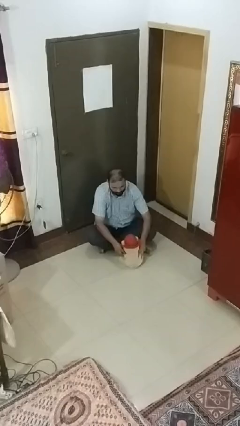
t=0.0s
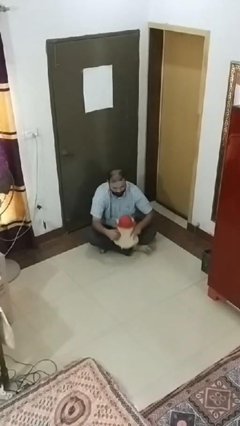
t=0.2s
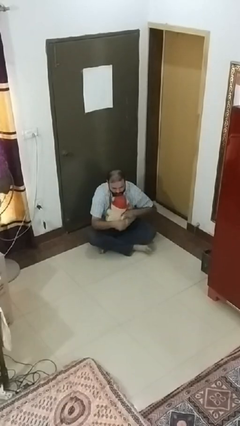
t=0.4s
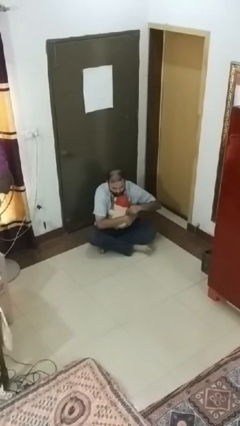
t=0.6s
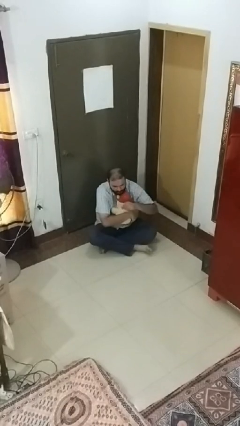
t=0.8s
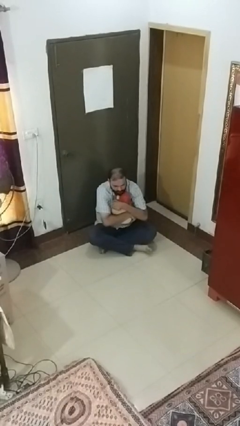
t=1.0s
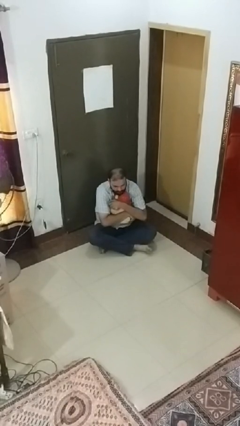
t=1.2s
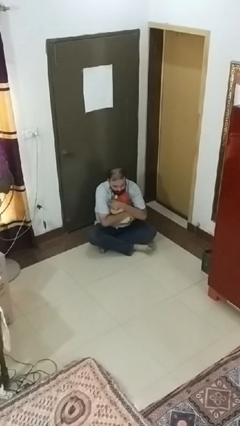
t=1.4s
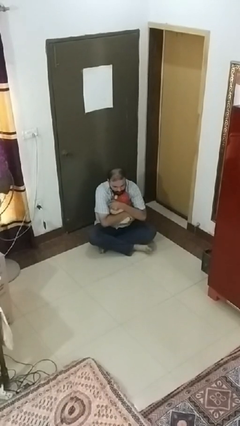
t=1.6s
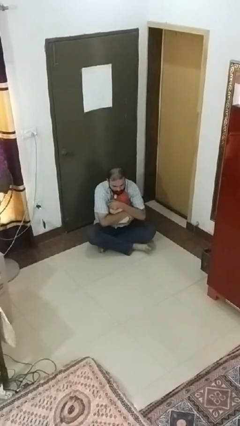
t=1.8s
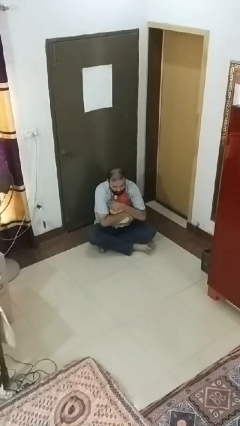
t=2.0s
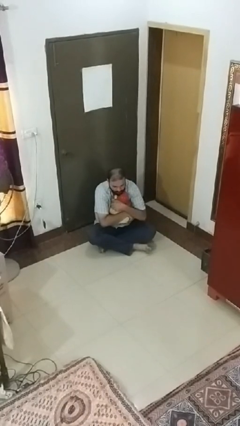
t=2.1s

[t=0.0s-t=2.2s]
person hugs stuffed animal

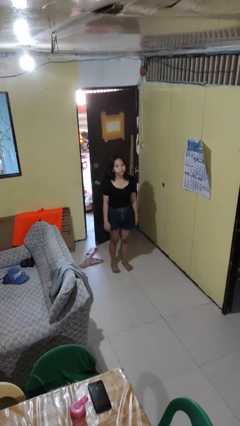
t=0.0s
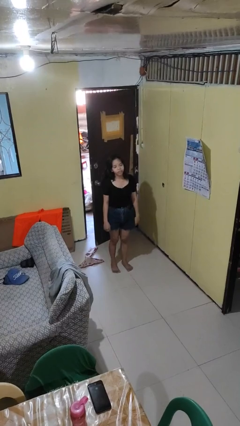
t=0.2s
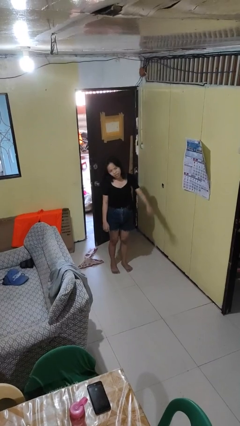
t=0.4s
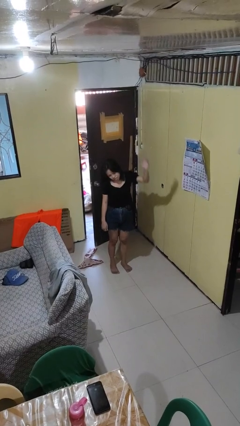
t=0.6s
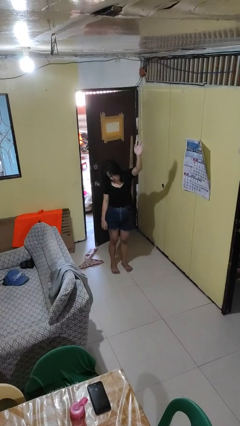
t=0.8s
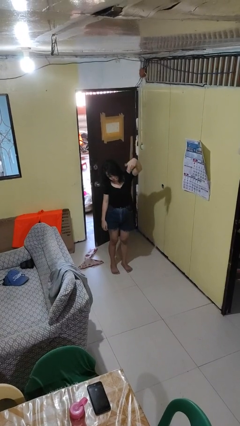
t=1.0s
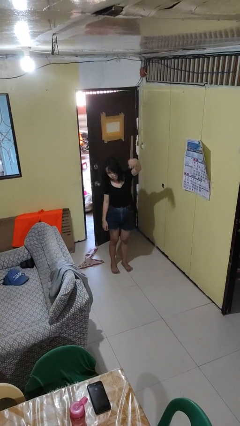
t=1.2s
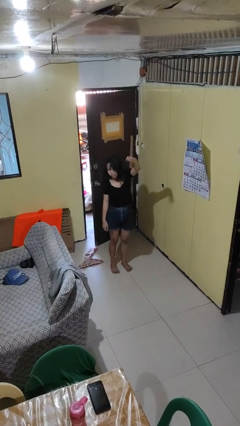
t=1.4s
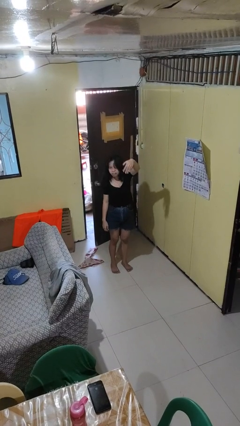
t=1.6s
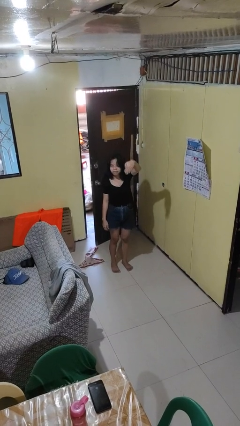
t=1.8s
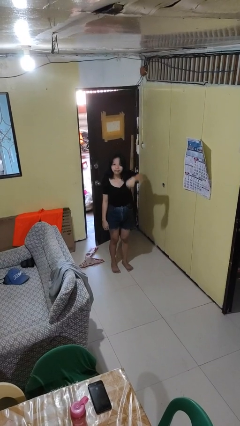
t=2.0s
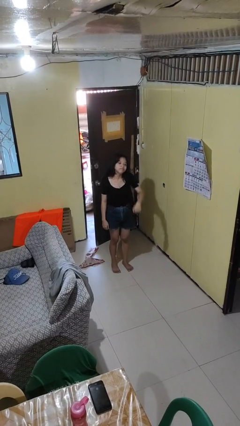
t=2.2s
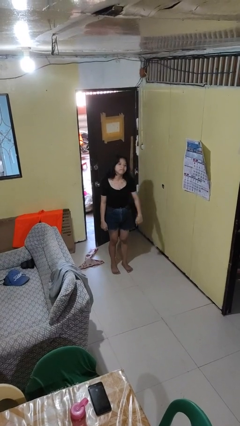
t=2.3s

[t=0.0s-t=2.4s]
person gestures come here

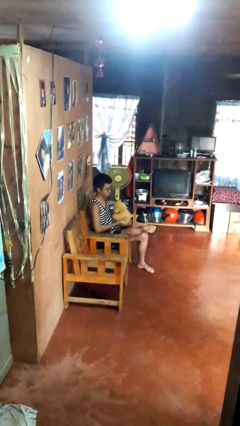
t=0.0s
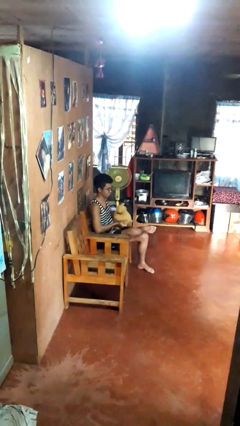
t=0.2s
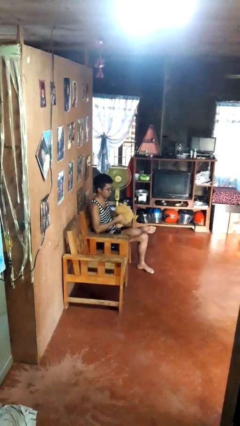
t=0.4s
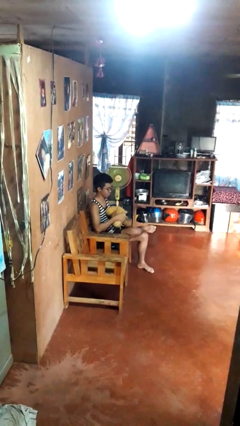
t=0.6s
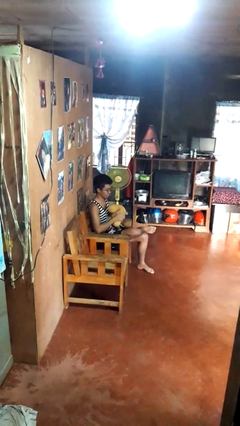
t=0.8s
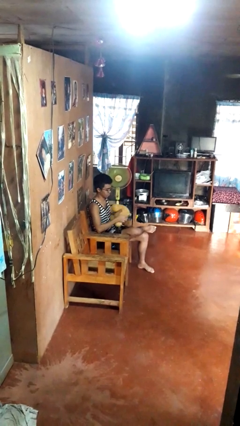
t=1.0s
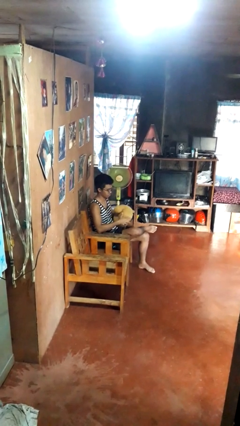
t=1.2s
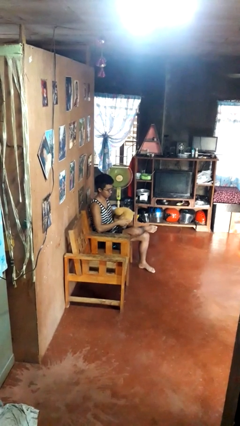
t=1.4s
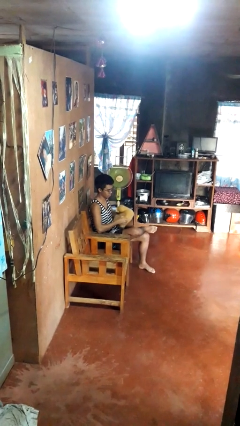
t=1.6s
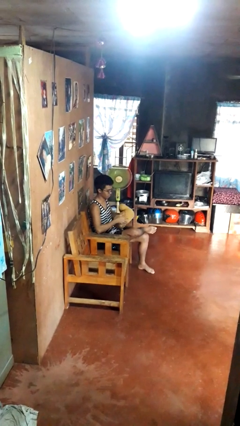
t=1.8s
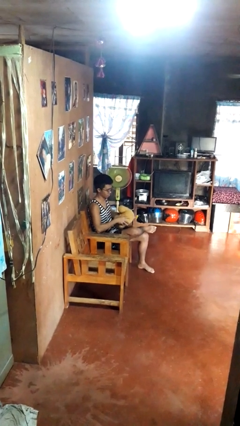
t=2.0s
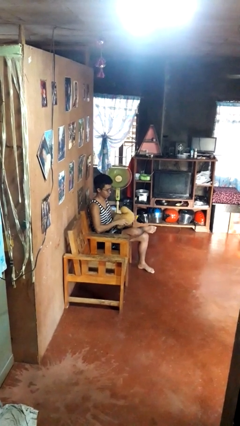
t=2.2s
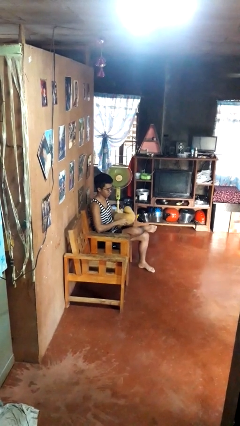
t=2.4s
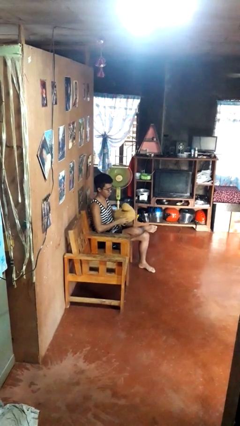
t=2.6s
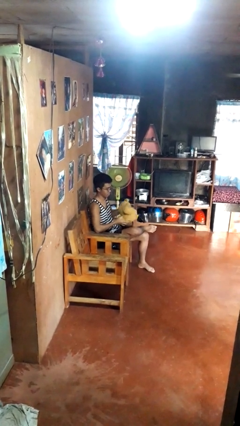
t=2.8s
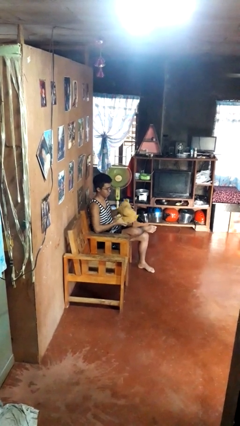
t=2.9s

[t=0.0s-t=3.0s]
person squeezes object

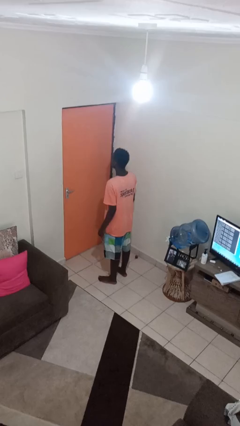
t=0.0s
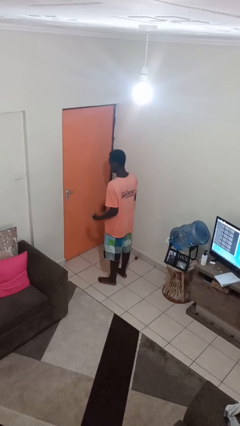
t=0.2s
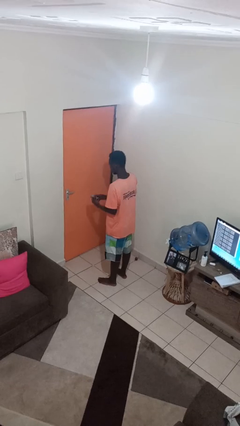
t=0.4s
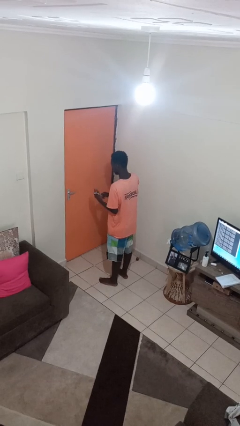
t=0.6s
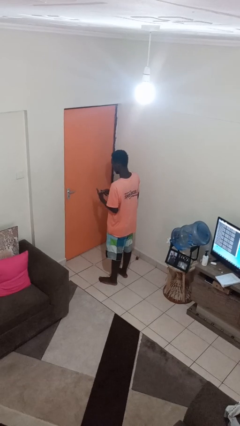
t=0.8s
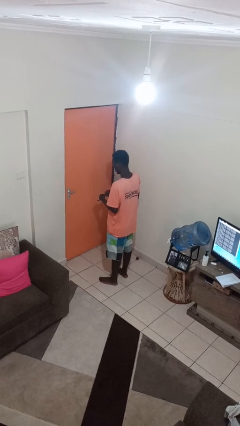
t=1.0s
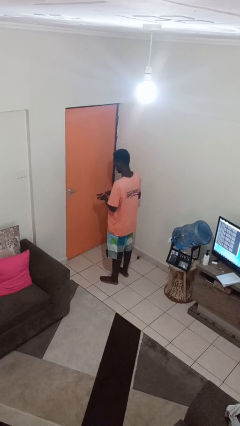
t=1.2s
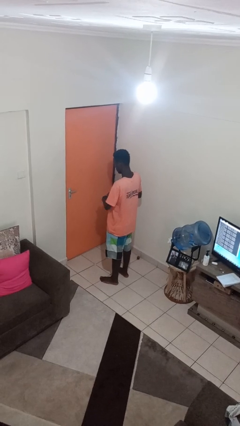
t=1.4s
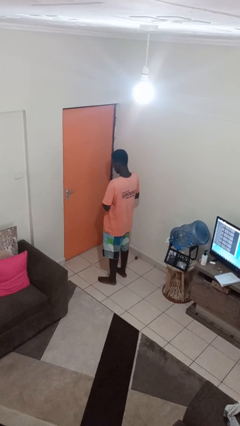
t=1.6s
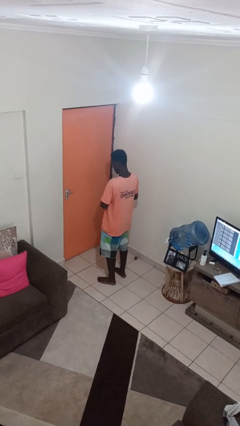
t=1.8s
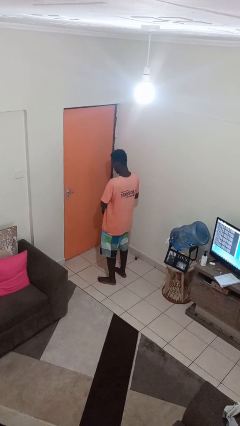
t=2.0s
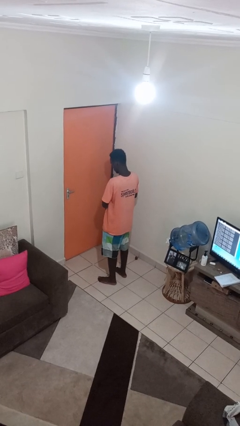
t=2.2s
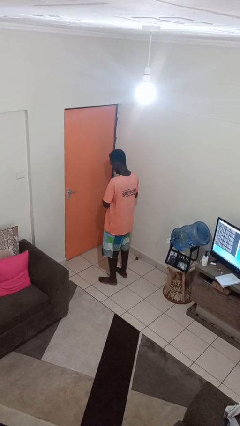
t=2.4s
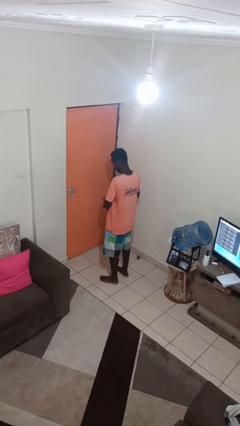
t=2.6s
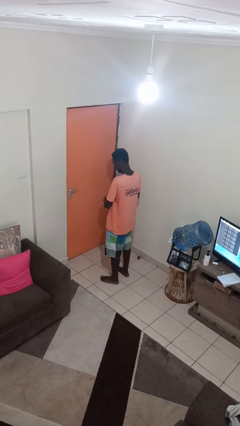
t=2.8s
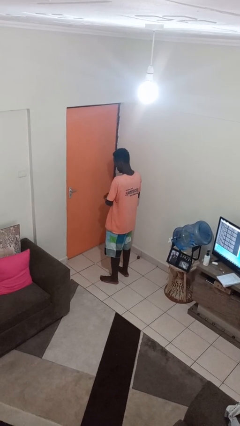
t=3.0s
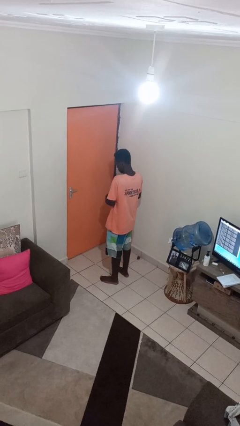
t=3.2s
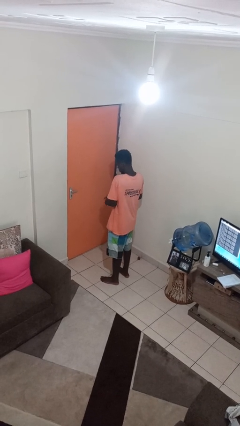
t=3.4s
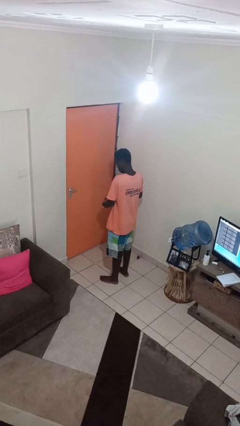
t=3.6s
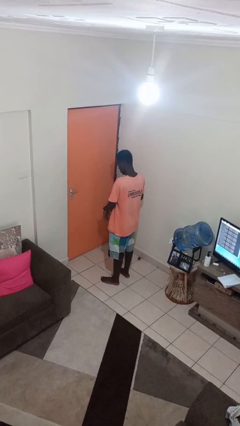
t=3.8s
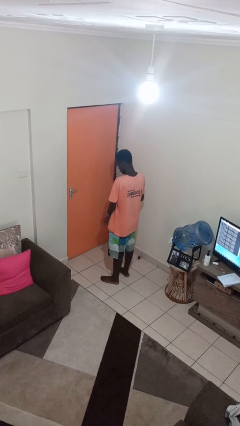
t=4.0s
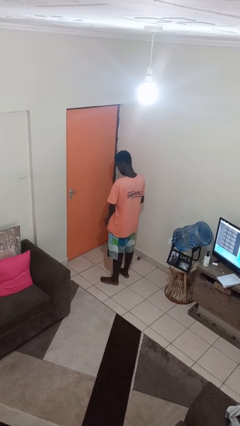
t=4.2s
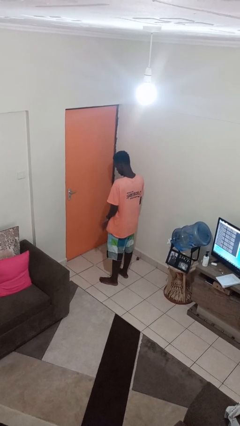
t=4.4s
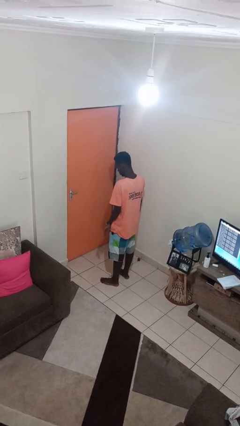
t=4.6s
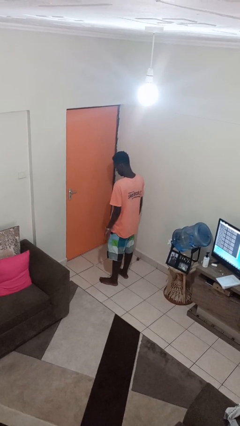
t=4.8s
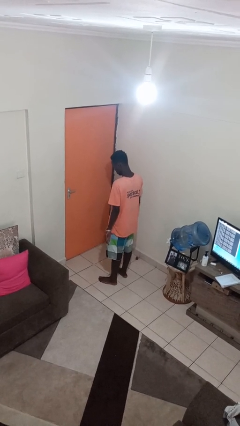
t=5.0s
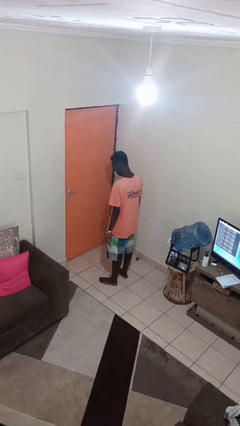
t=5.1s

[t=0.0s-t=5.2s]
person puts on wristwatch

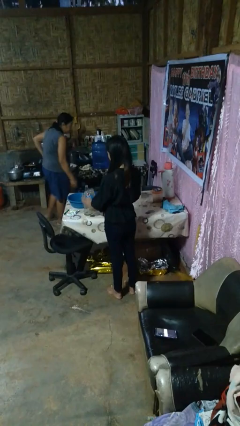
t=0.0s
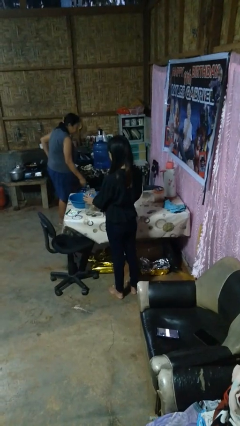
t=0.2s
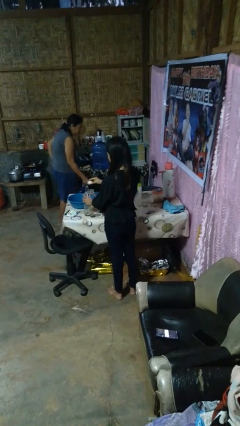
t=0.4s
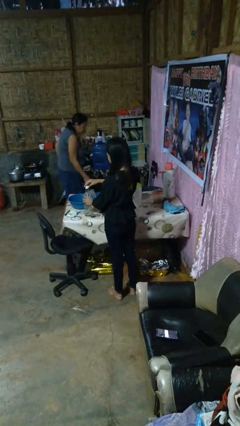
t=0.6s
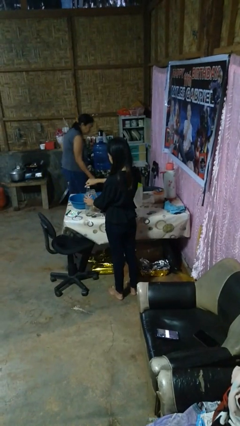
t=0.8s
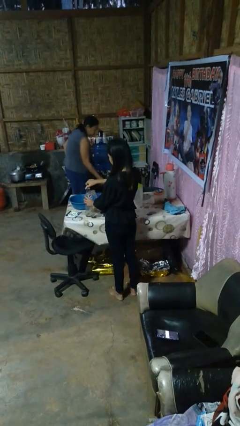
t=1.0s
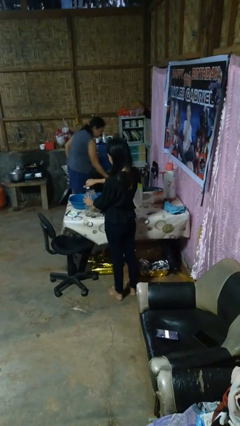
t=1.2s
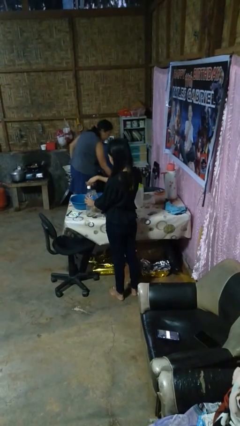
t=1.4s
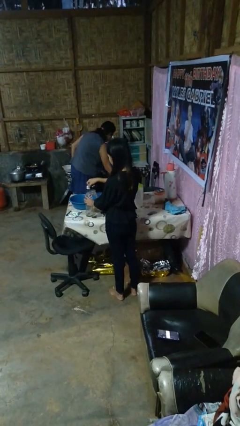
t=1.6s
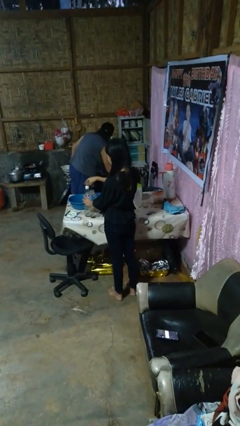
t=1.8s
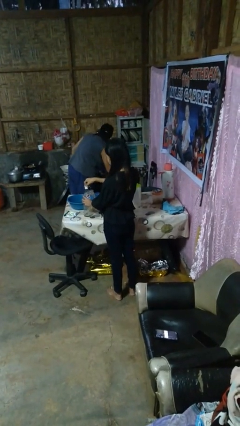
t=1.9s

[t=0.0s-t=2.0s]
person screws lid to bottle

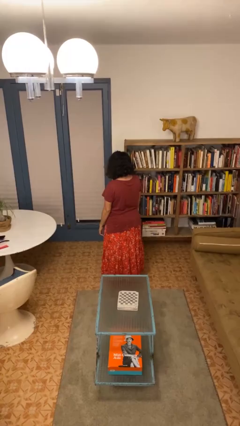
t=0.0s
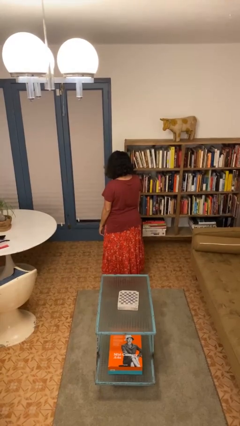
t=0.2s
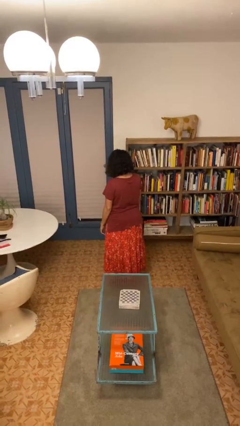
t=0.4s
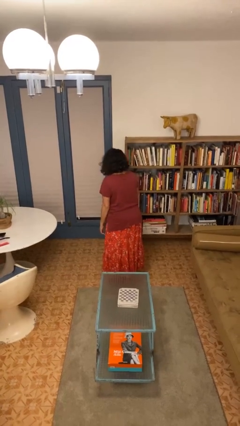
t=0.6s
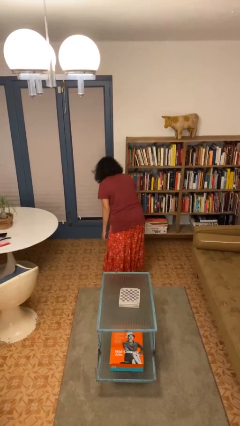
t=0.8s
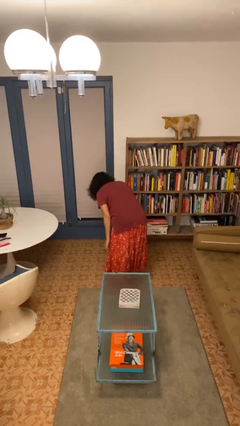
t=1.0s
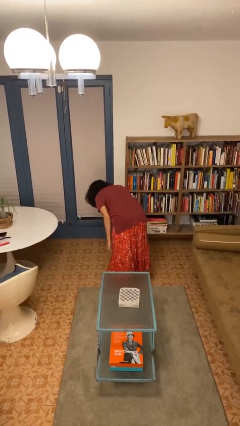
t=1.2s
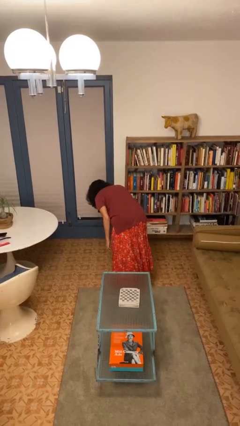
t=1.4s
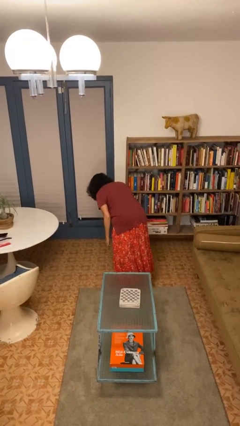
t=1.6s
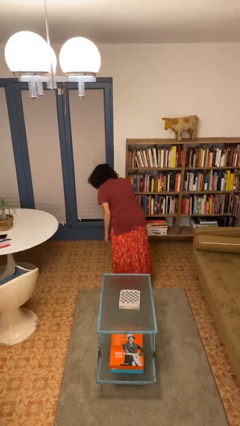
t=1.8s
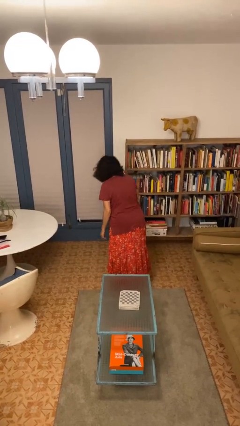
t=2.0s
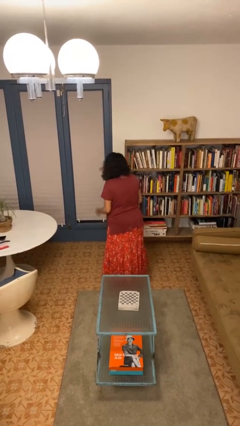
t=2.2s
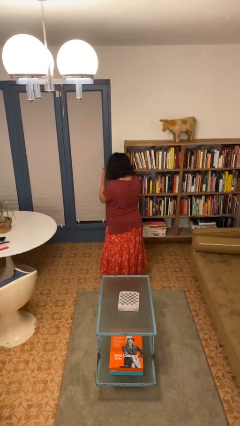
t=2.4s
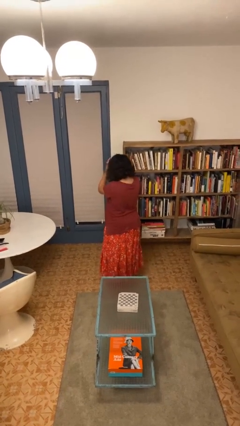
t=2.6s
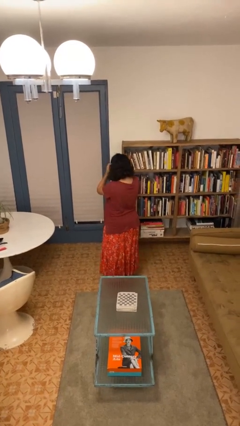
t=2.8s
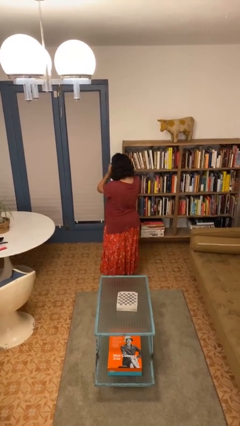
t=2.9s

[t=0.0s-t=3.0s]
person bows
